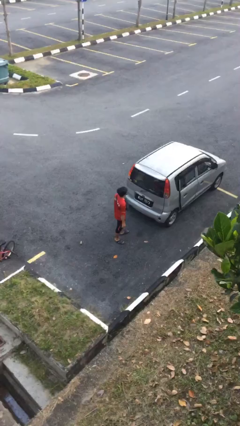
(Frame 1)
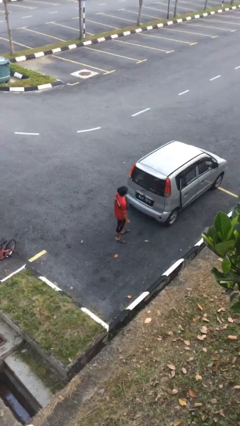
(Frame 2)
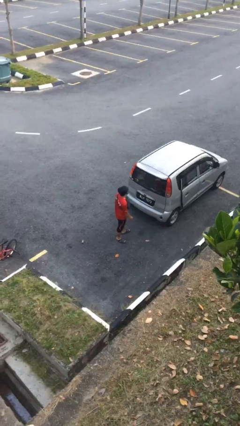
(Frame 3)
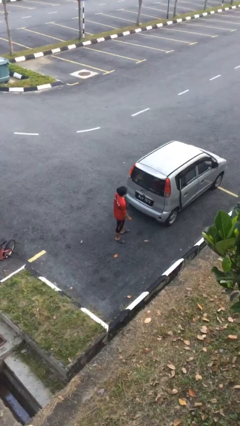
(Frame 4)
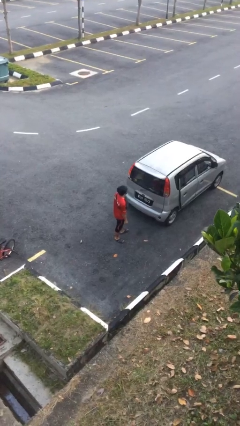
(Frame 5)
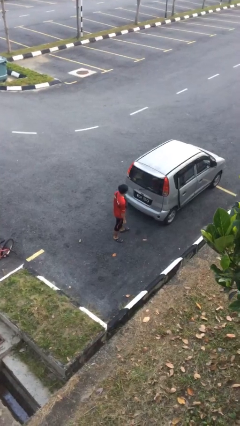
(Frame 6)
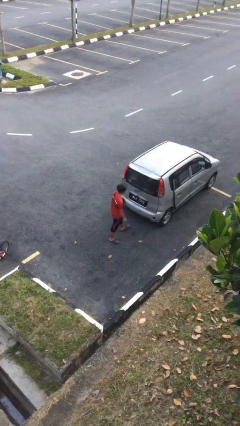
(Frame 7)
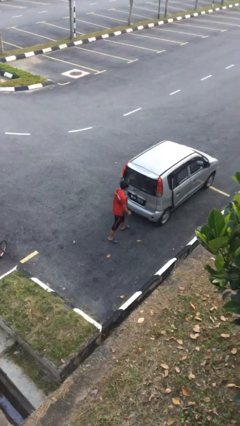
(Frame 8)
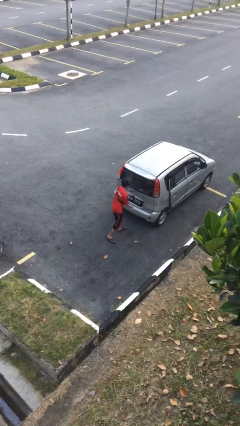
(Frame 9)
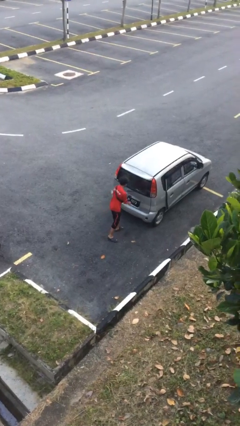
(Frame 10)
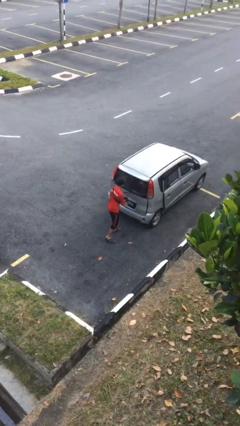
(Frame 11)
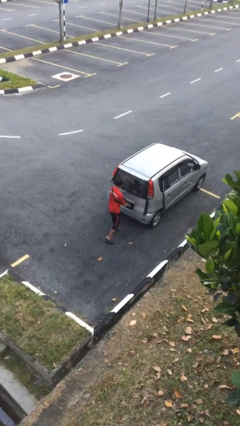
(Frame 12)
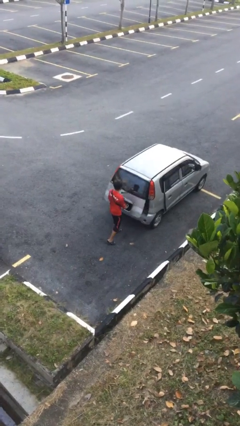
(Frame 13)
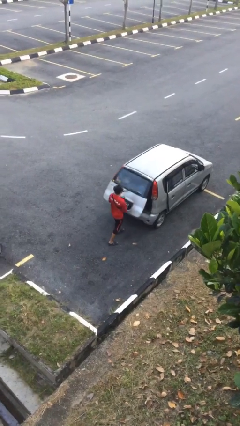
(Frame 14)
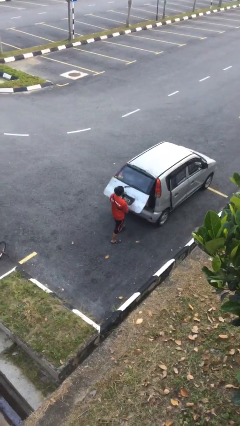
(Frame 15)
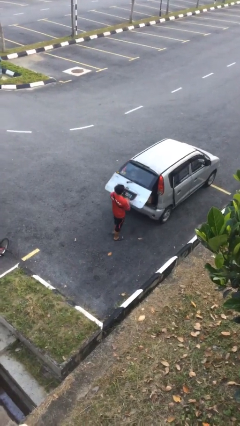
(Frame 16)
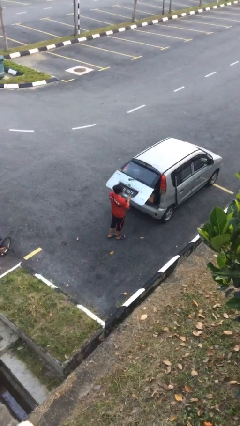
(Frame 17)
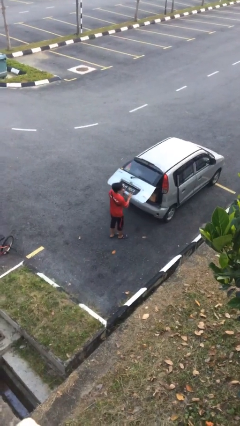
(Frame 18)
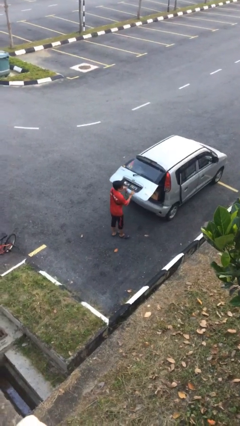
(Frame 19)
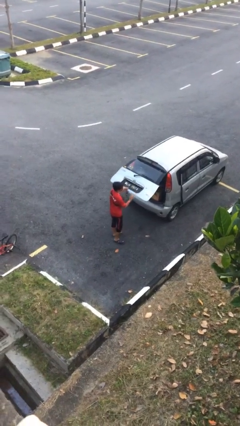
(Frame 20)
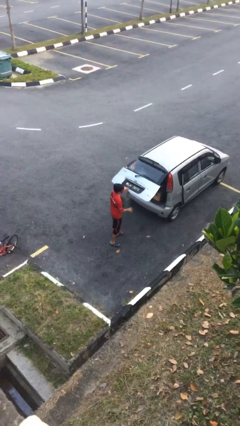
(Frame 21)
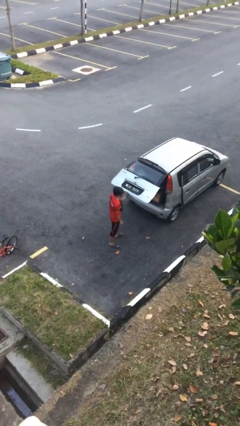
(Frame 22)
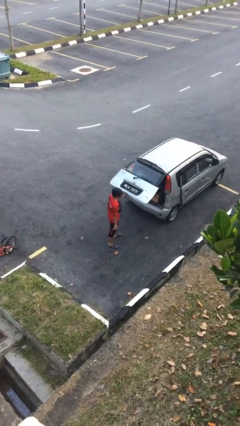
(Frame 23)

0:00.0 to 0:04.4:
person opens car trunk

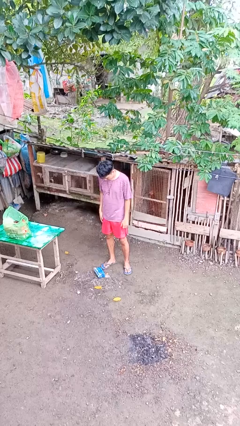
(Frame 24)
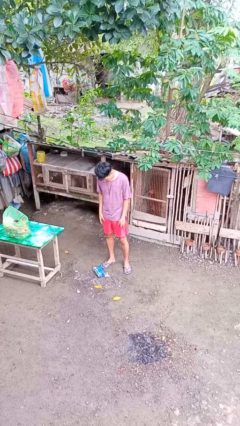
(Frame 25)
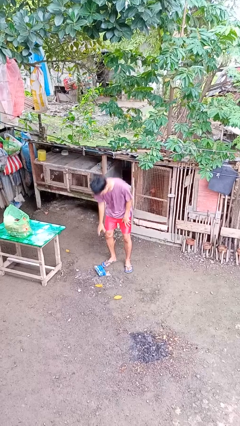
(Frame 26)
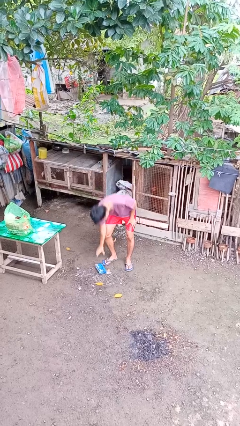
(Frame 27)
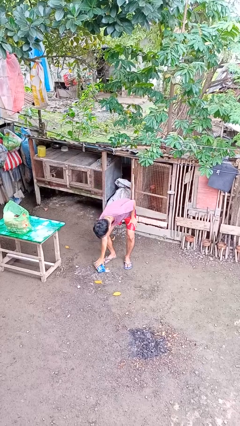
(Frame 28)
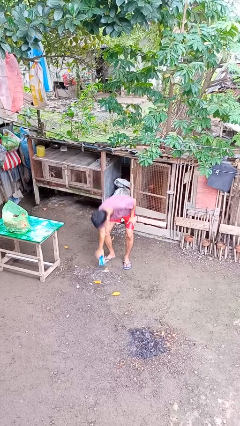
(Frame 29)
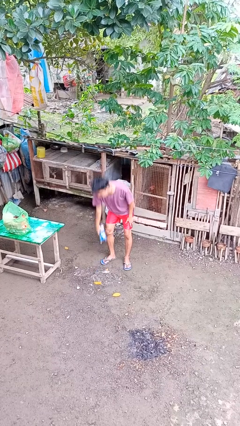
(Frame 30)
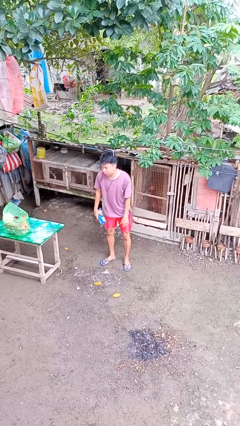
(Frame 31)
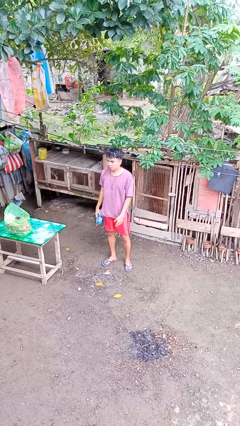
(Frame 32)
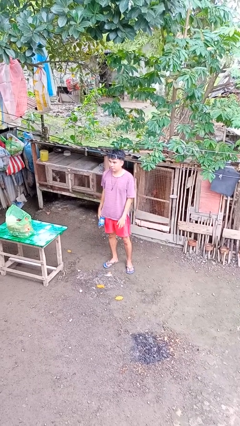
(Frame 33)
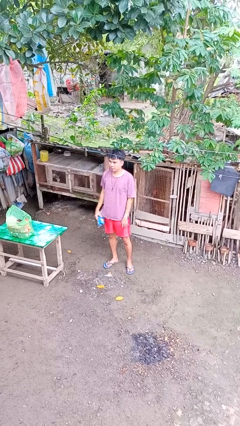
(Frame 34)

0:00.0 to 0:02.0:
person picks up object from floor

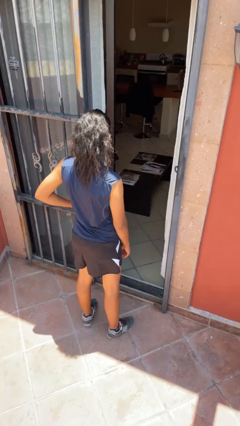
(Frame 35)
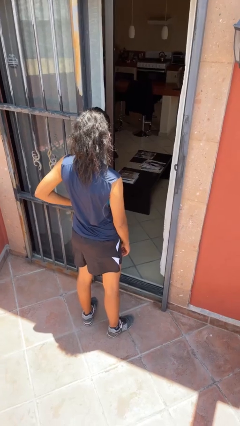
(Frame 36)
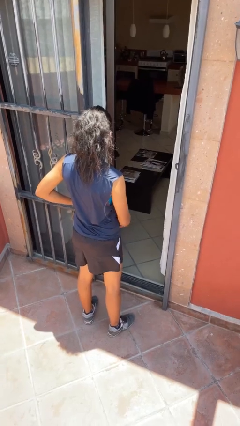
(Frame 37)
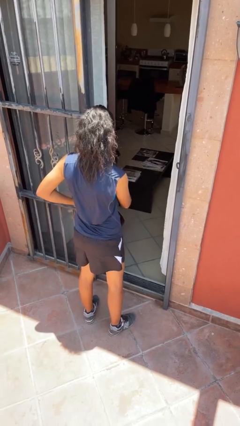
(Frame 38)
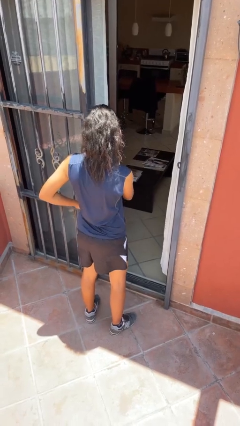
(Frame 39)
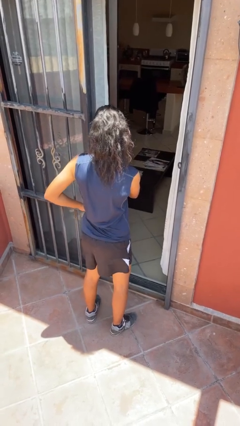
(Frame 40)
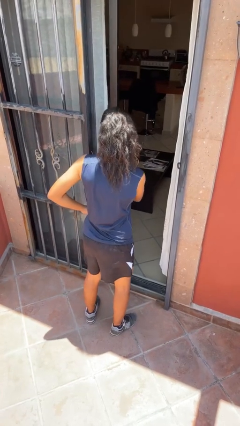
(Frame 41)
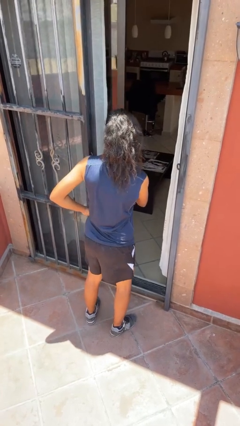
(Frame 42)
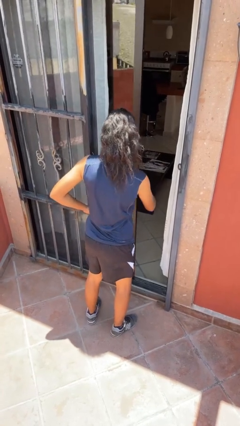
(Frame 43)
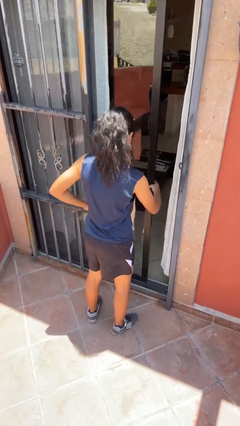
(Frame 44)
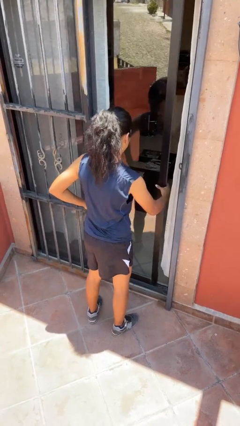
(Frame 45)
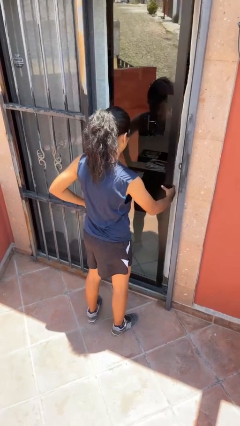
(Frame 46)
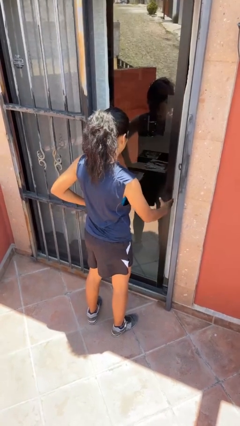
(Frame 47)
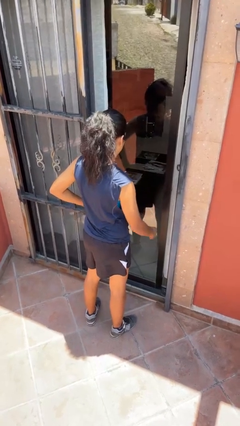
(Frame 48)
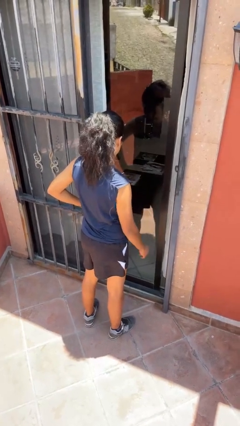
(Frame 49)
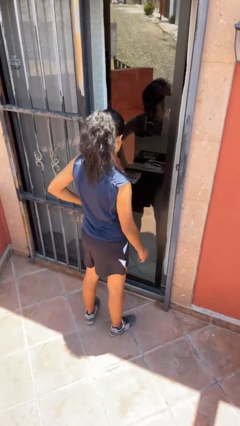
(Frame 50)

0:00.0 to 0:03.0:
person closes sliding door

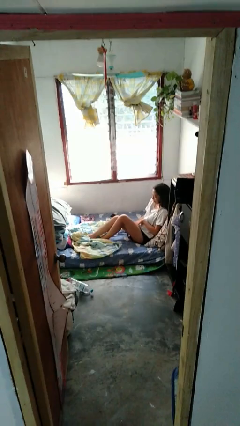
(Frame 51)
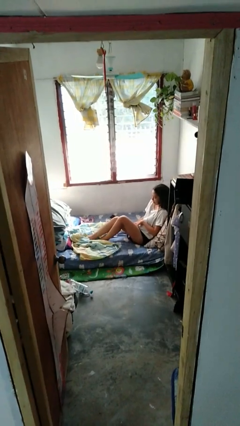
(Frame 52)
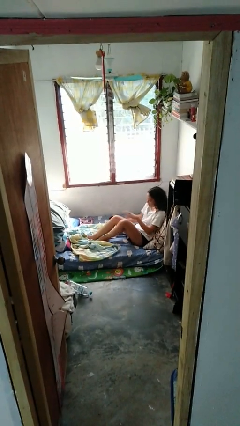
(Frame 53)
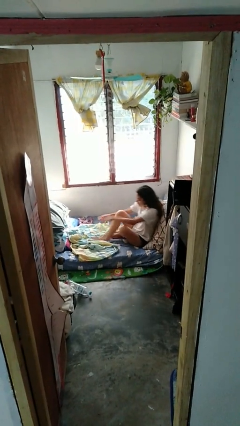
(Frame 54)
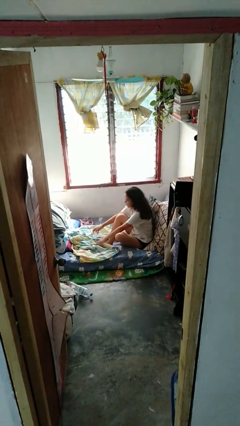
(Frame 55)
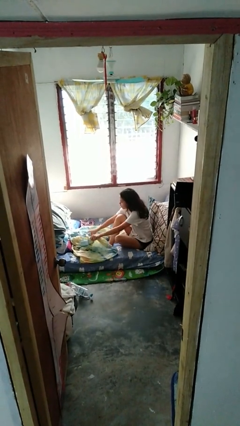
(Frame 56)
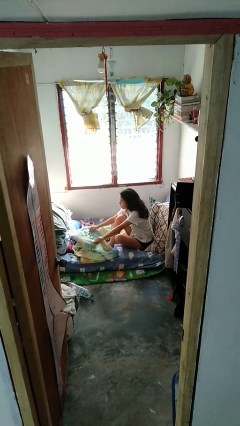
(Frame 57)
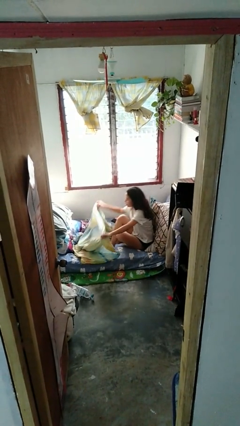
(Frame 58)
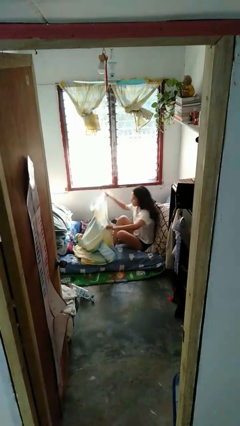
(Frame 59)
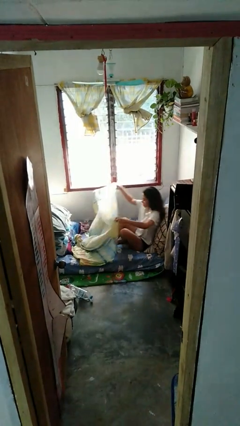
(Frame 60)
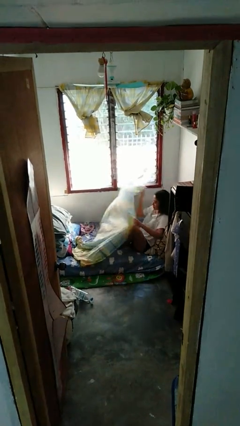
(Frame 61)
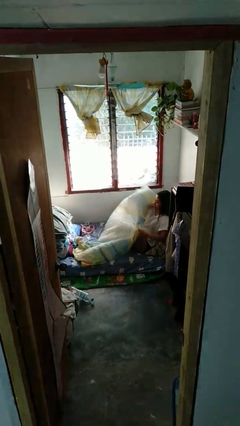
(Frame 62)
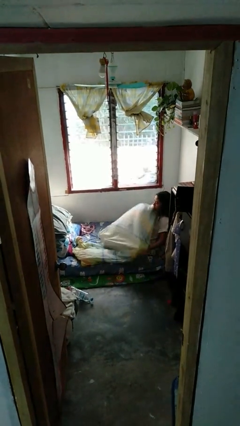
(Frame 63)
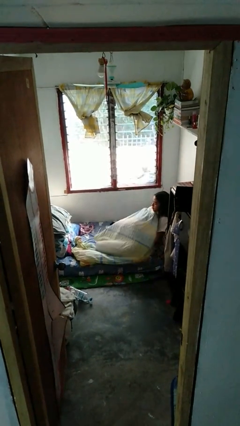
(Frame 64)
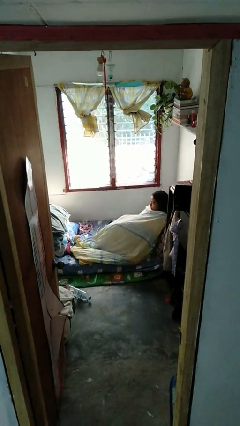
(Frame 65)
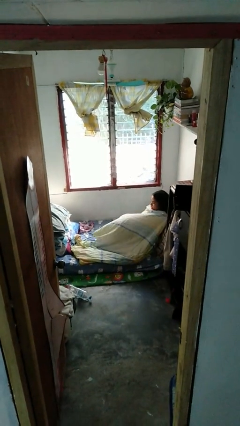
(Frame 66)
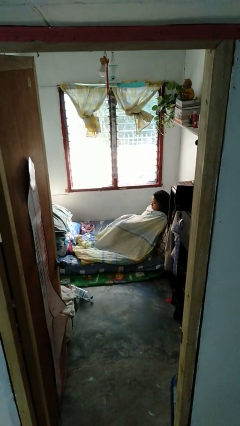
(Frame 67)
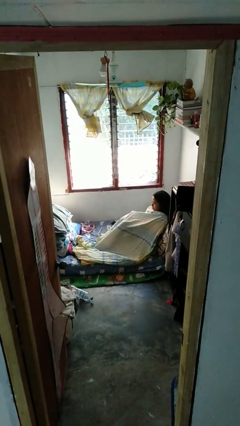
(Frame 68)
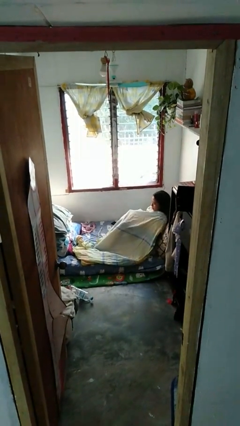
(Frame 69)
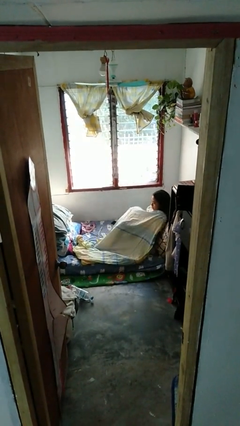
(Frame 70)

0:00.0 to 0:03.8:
person covers with bedsheets

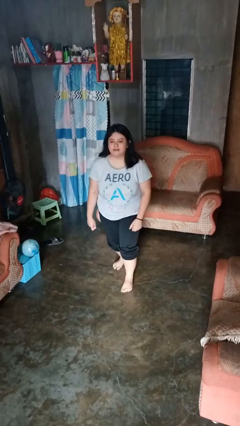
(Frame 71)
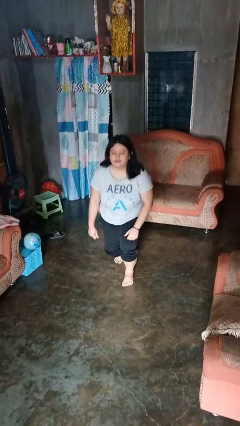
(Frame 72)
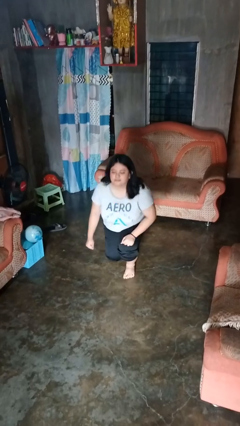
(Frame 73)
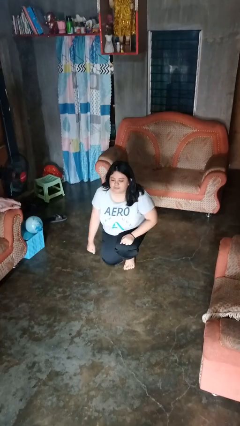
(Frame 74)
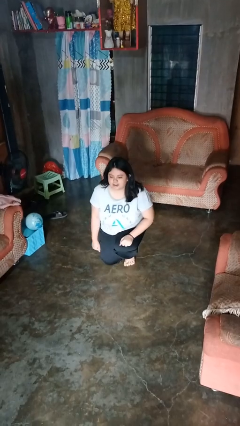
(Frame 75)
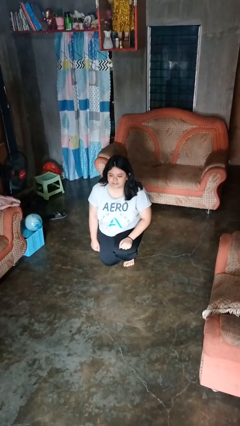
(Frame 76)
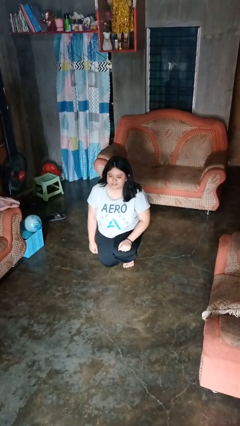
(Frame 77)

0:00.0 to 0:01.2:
person kneels

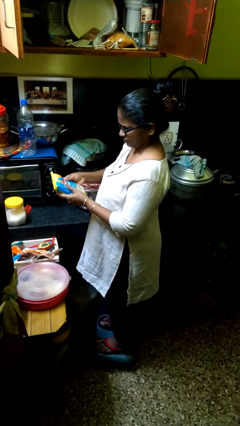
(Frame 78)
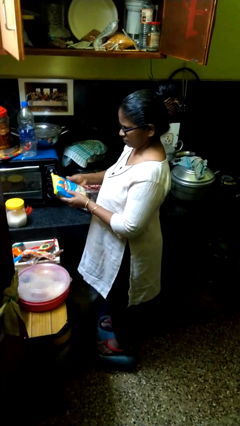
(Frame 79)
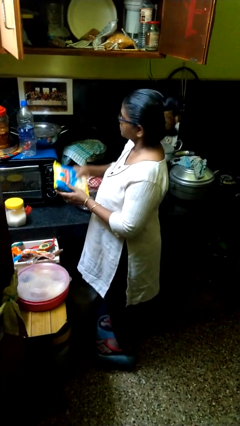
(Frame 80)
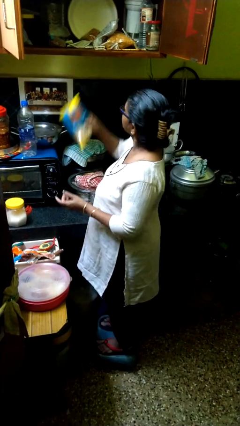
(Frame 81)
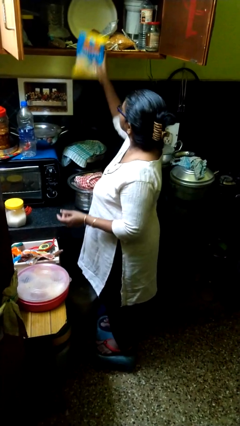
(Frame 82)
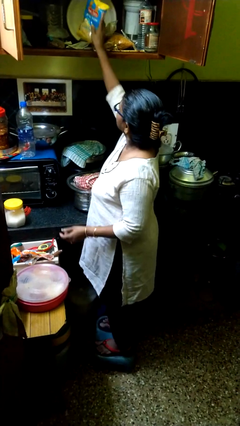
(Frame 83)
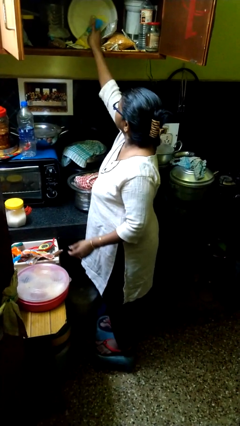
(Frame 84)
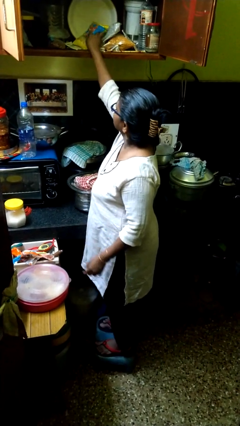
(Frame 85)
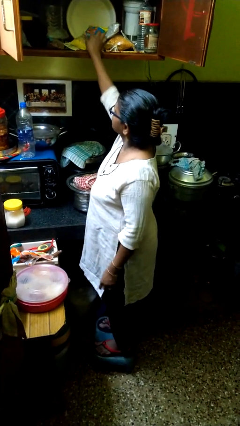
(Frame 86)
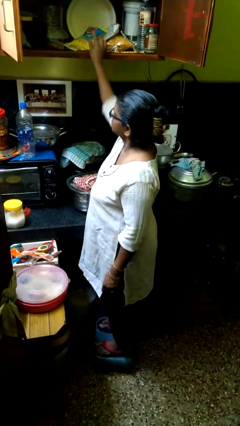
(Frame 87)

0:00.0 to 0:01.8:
person puts object in cabinet

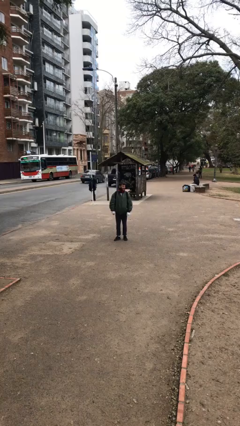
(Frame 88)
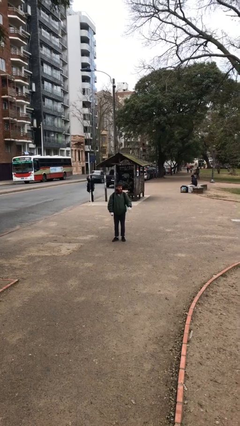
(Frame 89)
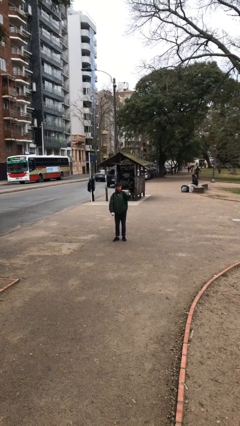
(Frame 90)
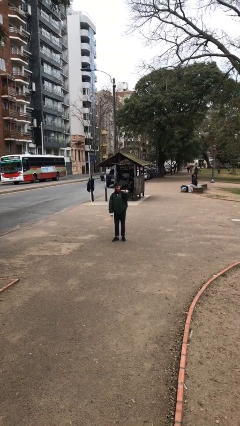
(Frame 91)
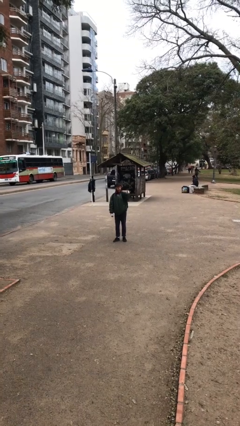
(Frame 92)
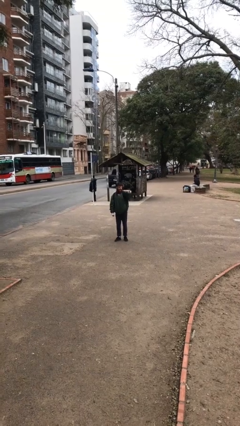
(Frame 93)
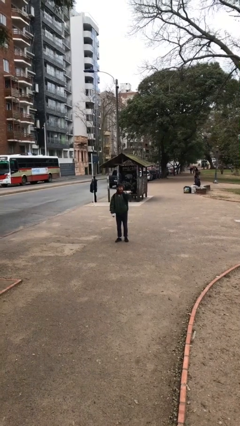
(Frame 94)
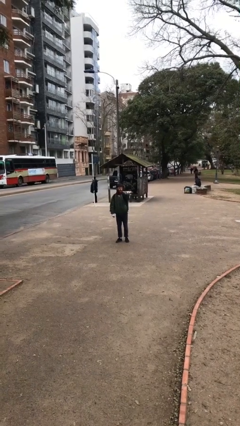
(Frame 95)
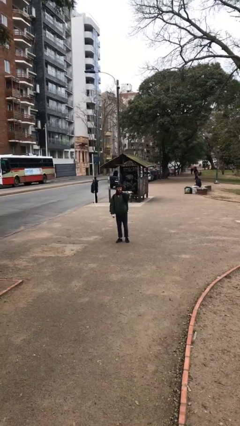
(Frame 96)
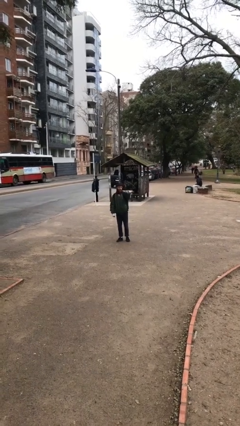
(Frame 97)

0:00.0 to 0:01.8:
person points at person
